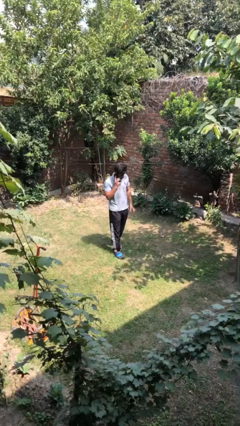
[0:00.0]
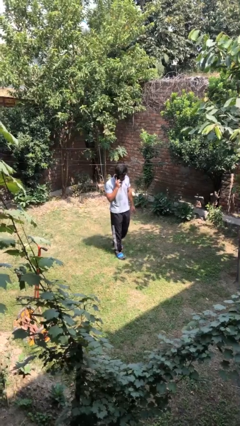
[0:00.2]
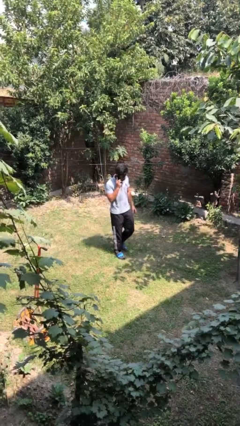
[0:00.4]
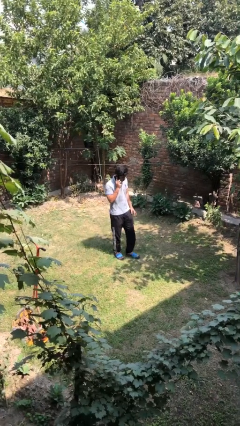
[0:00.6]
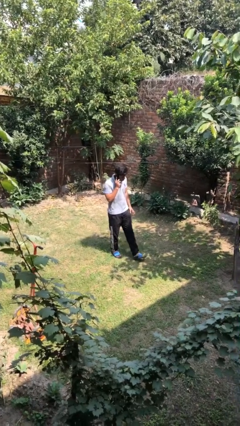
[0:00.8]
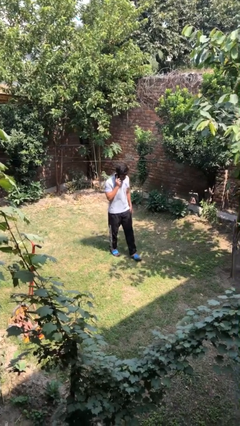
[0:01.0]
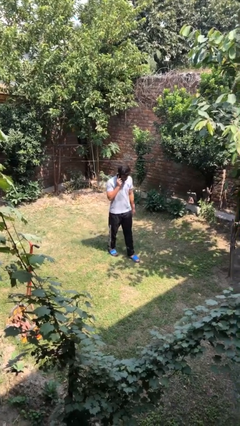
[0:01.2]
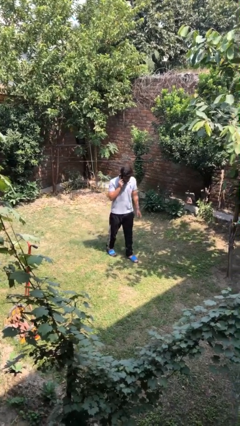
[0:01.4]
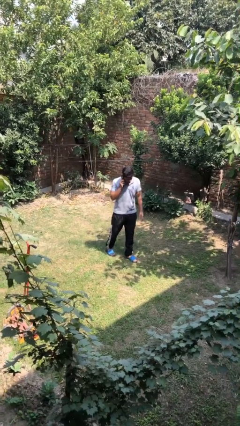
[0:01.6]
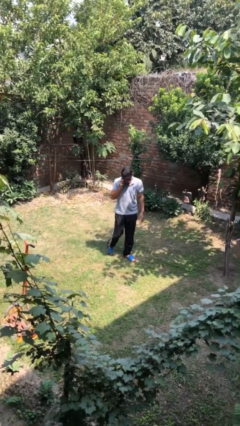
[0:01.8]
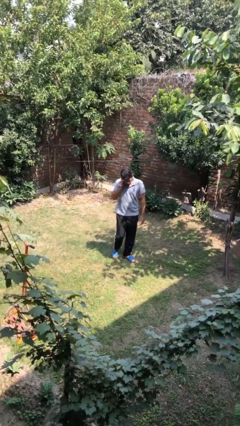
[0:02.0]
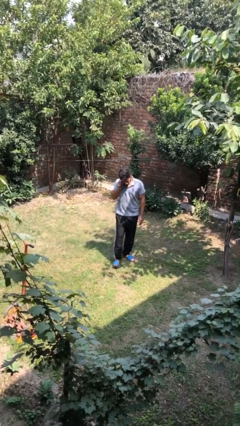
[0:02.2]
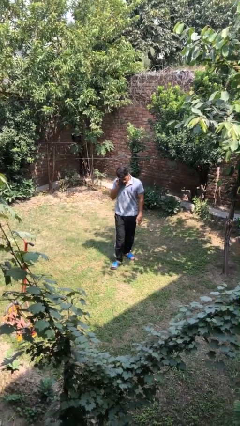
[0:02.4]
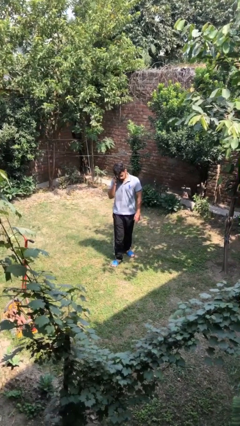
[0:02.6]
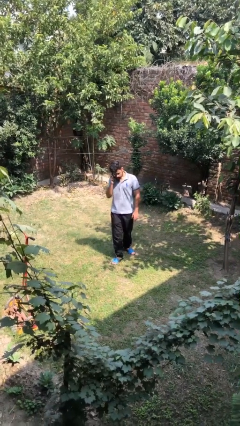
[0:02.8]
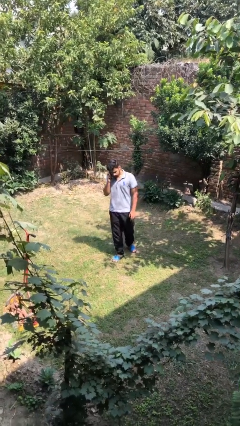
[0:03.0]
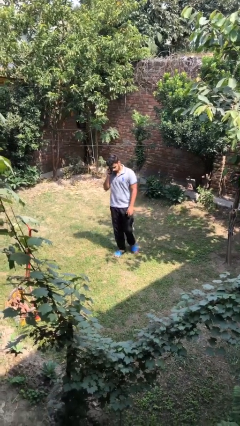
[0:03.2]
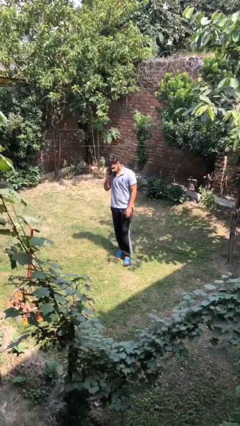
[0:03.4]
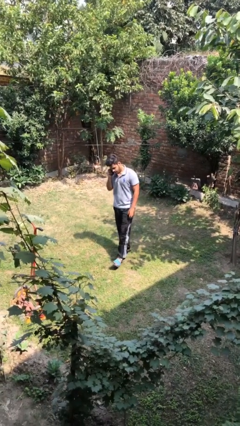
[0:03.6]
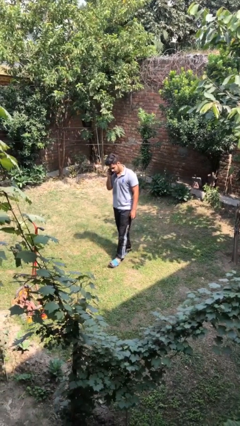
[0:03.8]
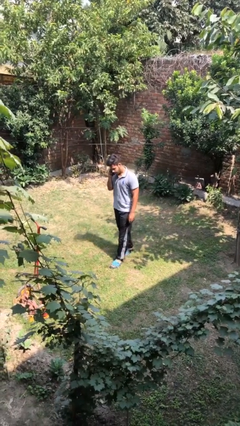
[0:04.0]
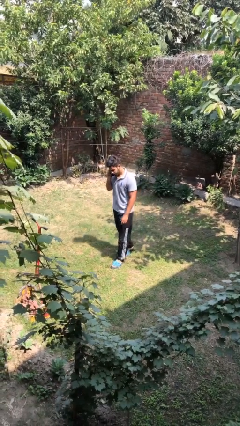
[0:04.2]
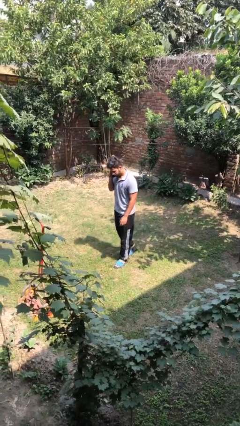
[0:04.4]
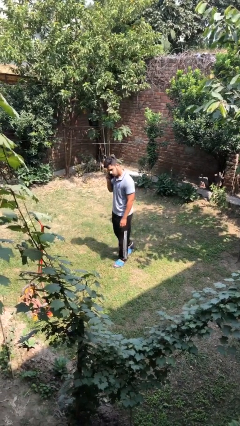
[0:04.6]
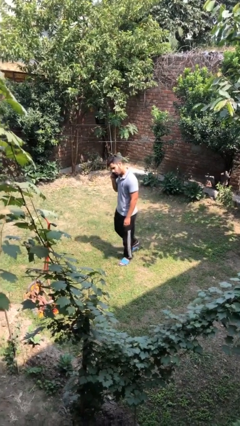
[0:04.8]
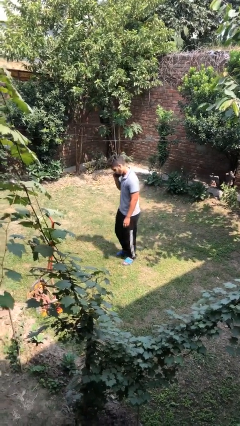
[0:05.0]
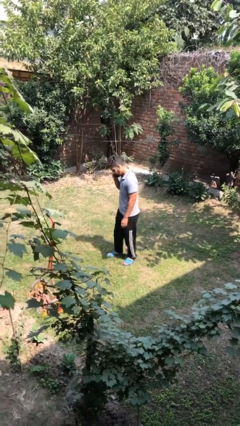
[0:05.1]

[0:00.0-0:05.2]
person talks on phone

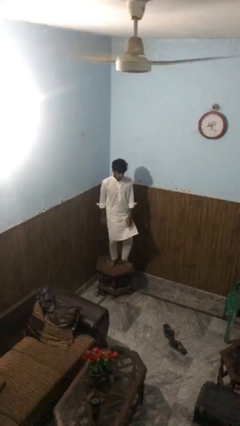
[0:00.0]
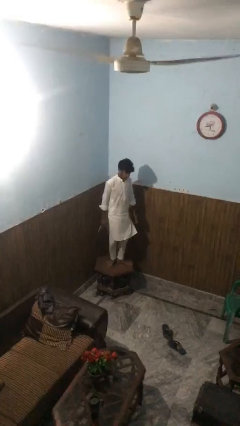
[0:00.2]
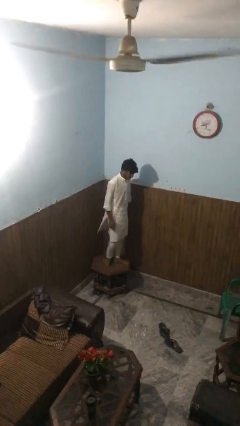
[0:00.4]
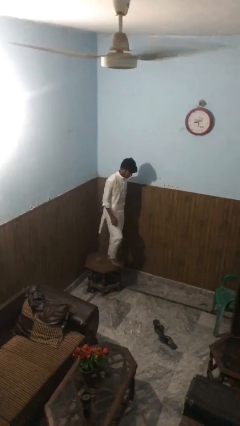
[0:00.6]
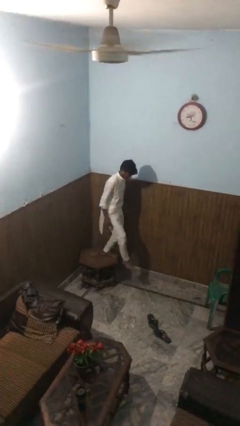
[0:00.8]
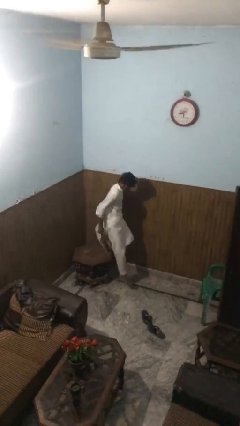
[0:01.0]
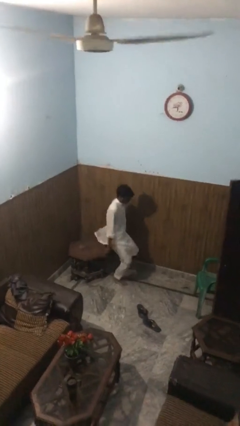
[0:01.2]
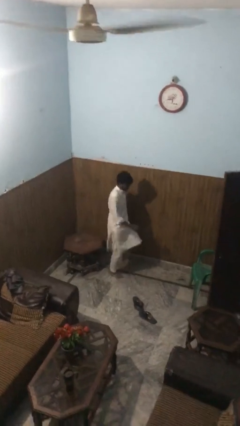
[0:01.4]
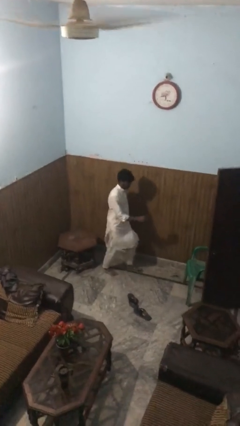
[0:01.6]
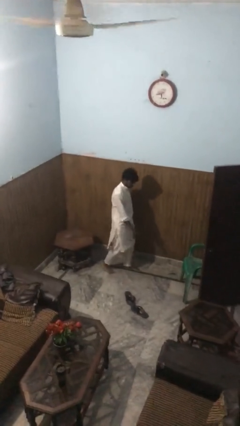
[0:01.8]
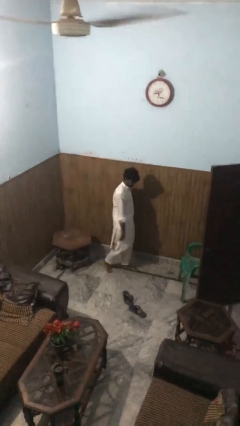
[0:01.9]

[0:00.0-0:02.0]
person climbs off table

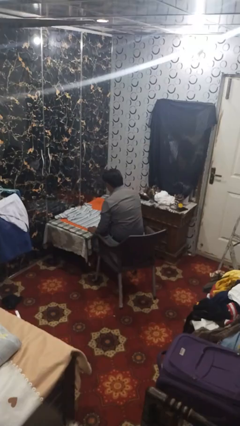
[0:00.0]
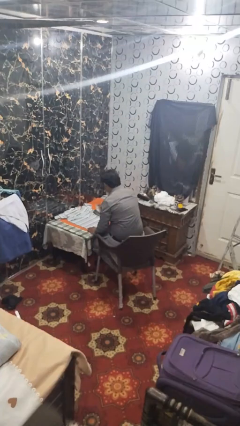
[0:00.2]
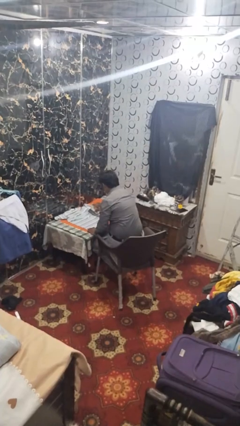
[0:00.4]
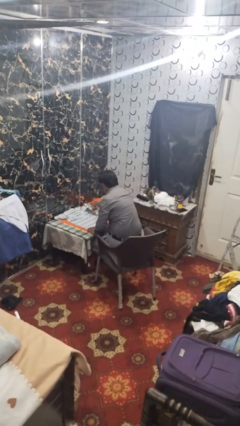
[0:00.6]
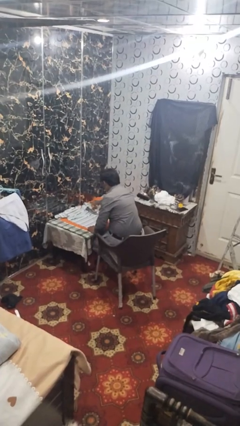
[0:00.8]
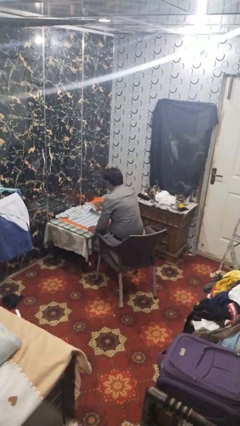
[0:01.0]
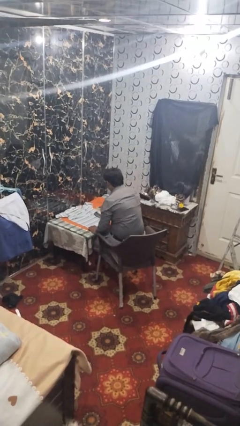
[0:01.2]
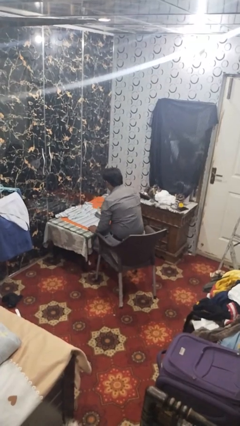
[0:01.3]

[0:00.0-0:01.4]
person irons clothes

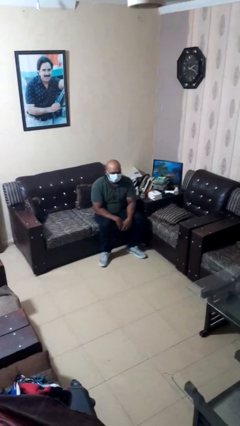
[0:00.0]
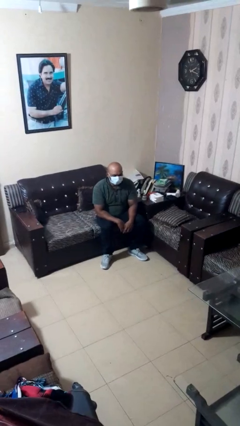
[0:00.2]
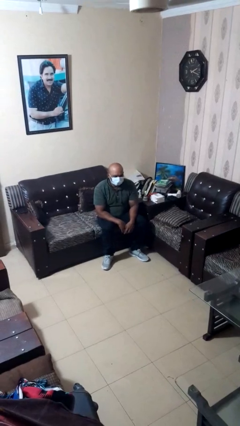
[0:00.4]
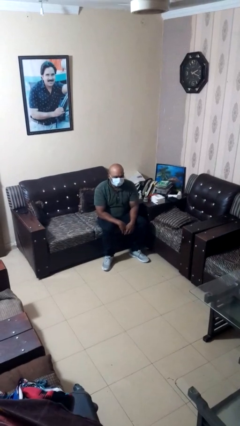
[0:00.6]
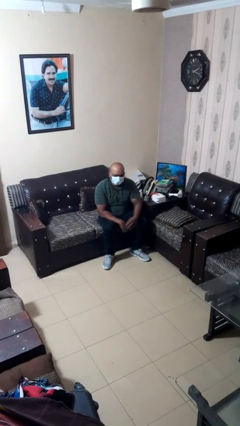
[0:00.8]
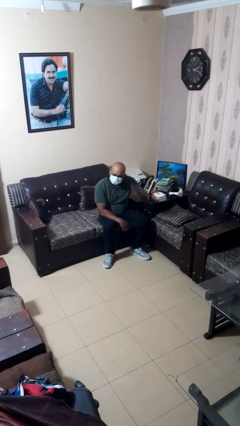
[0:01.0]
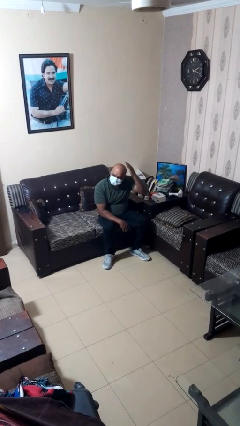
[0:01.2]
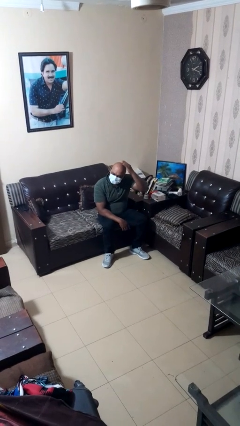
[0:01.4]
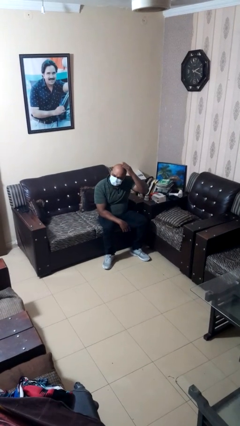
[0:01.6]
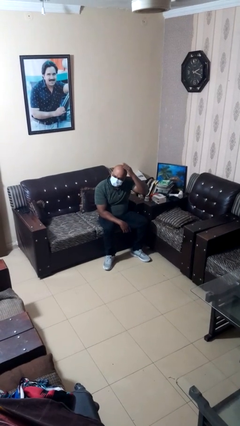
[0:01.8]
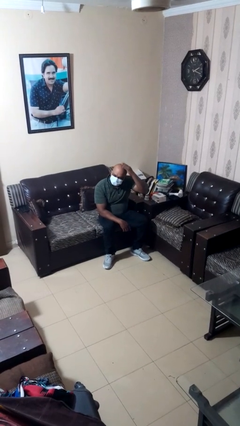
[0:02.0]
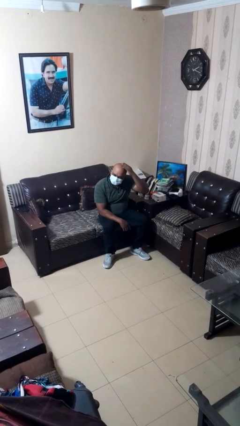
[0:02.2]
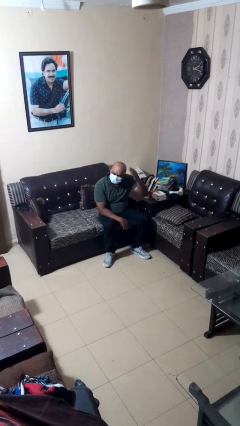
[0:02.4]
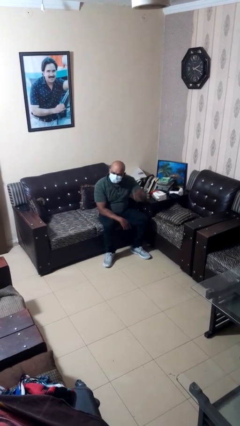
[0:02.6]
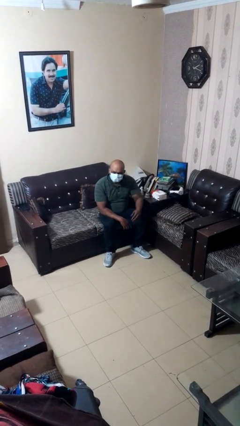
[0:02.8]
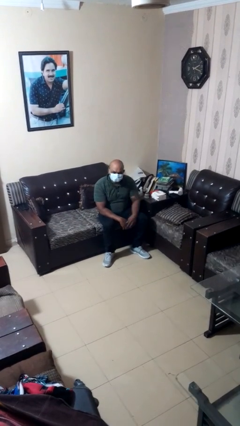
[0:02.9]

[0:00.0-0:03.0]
person pats head

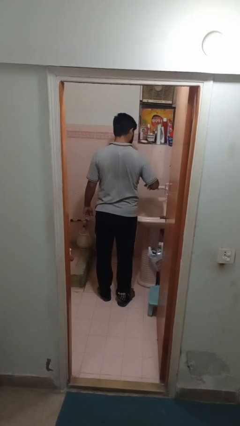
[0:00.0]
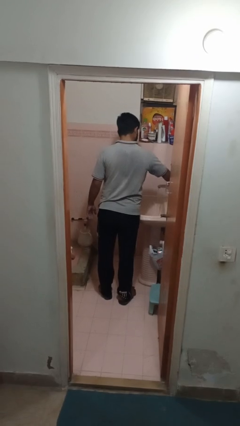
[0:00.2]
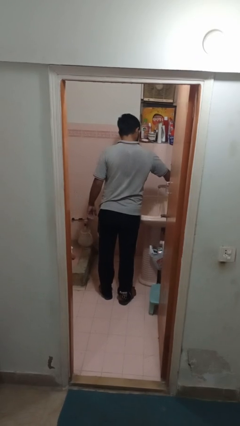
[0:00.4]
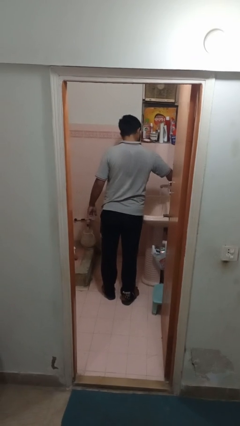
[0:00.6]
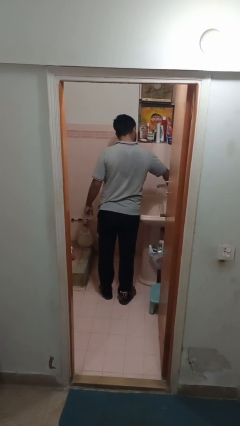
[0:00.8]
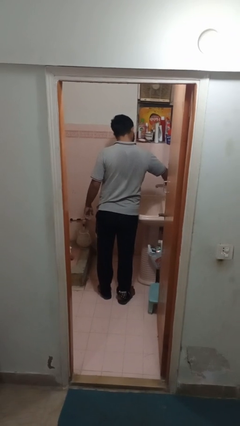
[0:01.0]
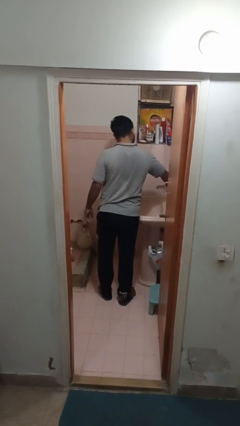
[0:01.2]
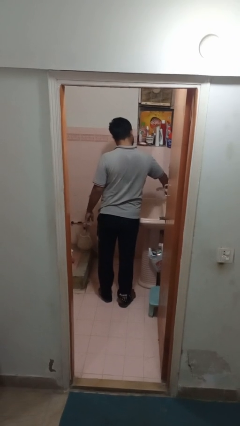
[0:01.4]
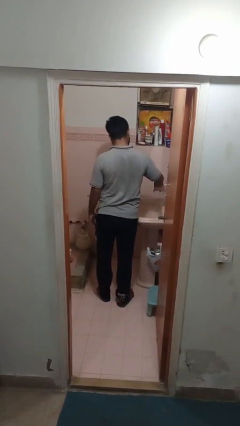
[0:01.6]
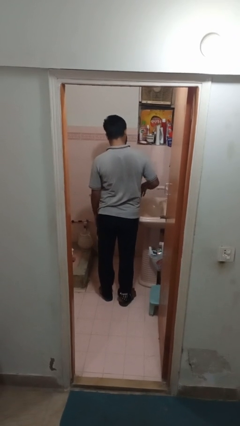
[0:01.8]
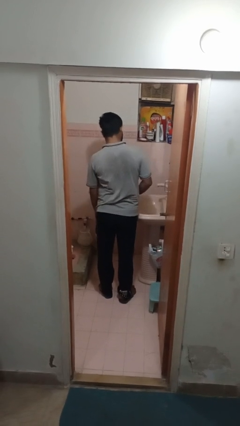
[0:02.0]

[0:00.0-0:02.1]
person turns off faucet

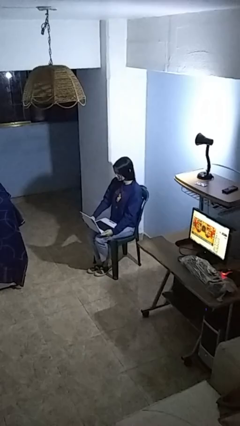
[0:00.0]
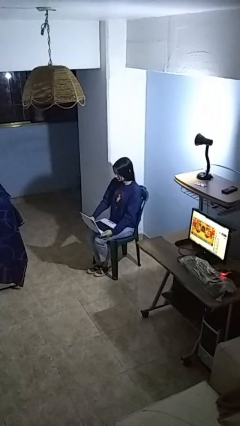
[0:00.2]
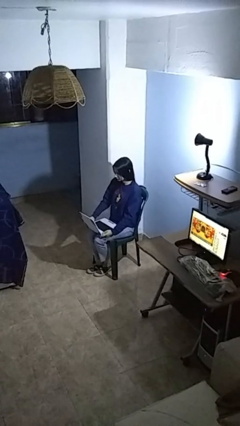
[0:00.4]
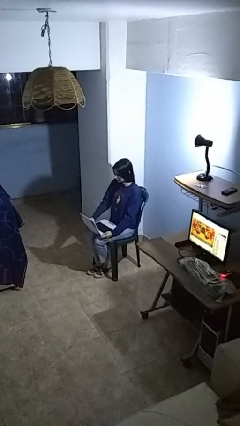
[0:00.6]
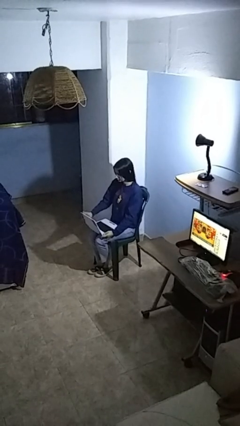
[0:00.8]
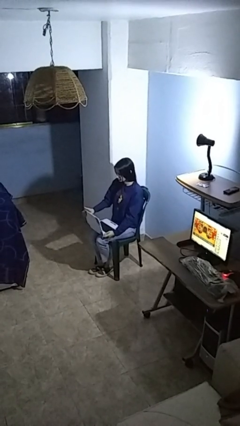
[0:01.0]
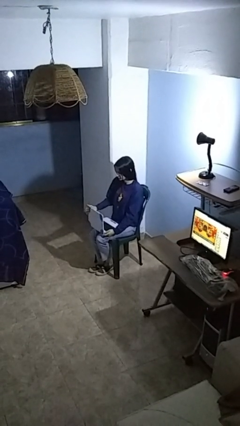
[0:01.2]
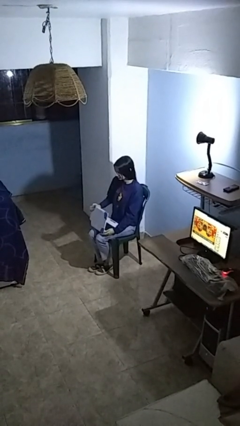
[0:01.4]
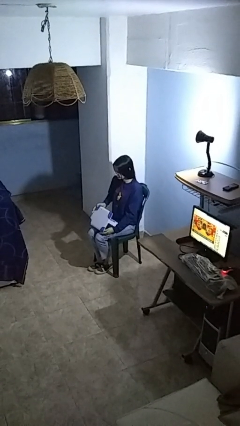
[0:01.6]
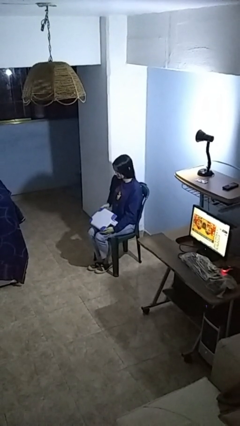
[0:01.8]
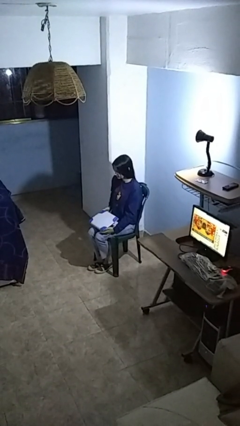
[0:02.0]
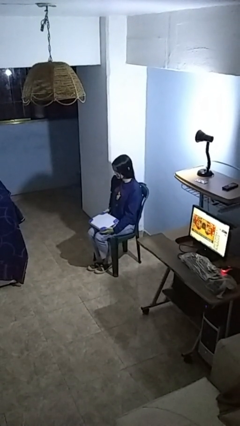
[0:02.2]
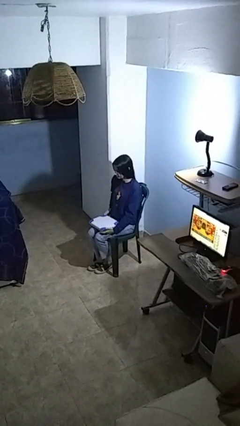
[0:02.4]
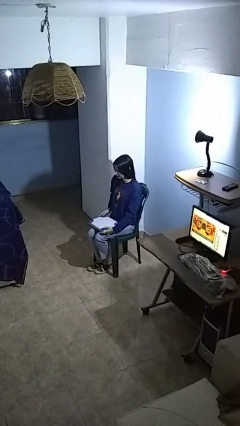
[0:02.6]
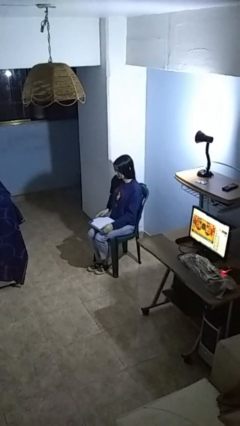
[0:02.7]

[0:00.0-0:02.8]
person closes laptop

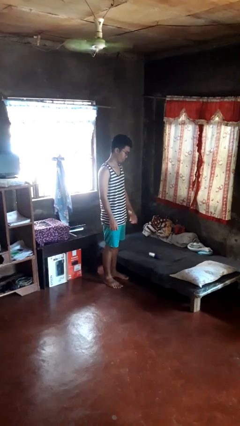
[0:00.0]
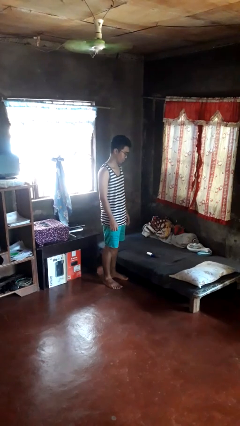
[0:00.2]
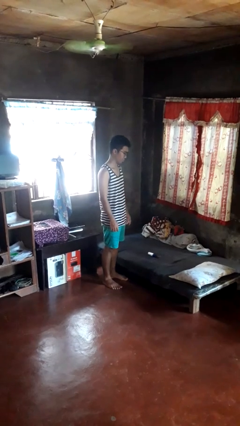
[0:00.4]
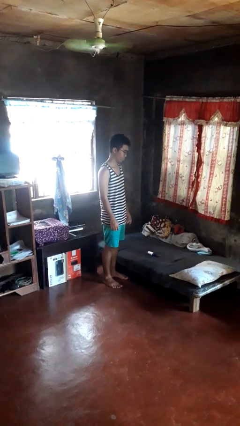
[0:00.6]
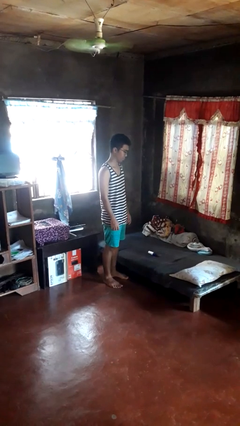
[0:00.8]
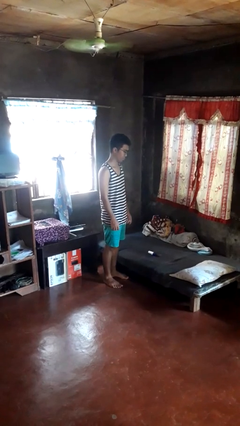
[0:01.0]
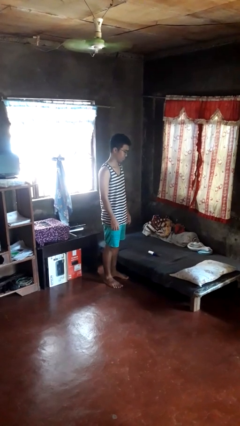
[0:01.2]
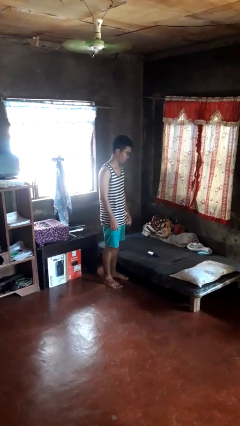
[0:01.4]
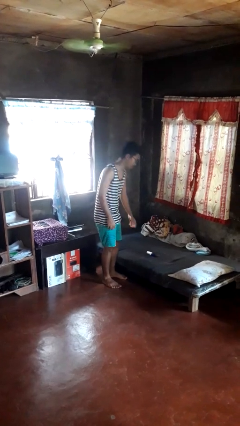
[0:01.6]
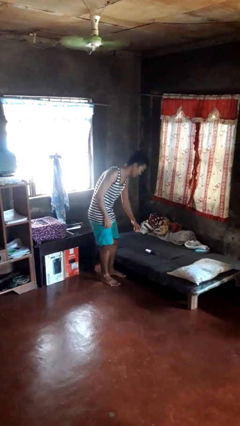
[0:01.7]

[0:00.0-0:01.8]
person throws object on bed
